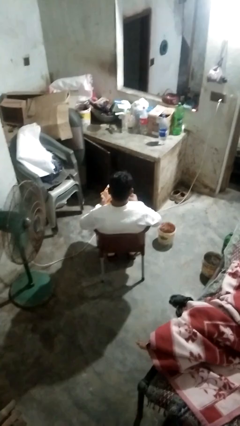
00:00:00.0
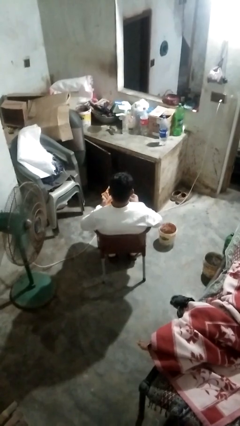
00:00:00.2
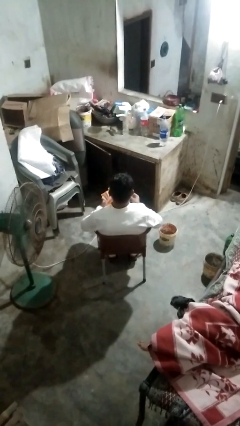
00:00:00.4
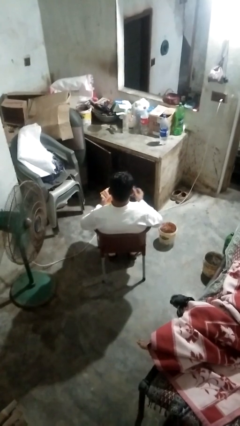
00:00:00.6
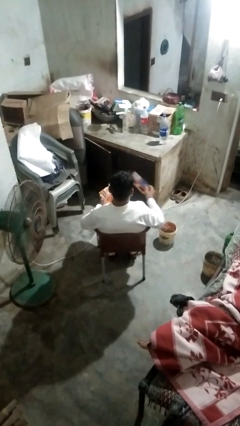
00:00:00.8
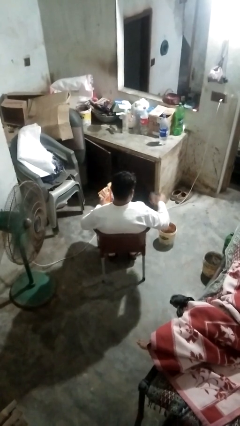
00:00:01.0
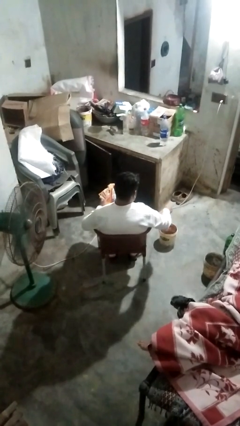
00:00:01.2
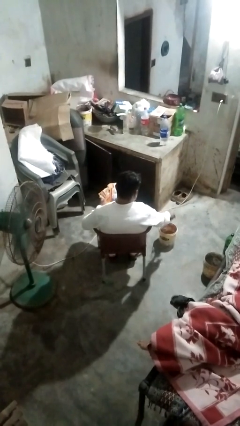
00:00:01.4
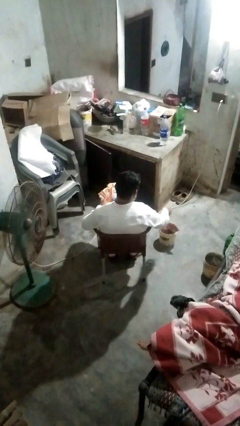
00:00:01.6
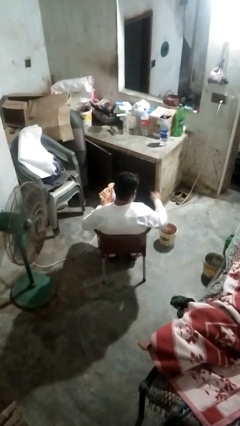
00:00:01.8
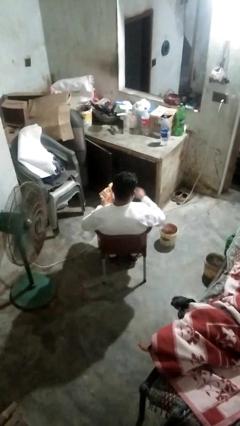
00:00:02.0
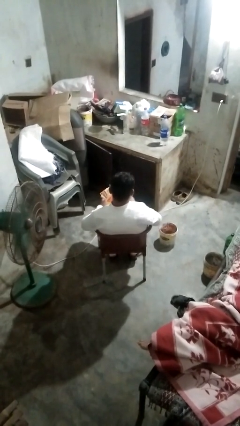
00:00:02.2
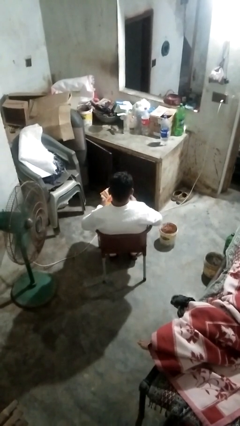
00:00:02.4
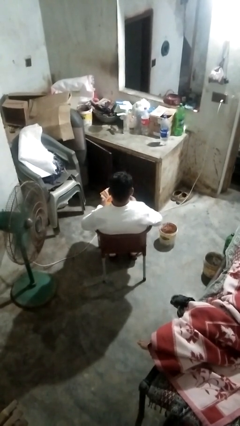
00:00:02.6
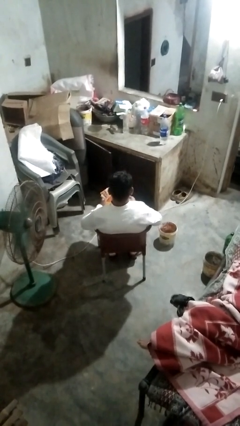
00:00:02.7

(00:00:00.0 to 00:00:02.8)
person discards trash

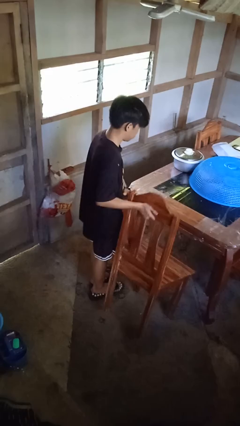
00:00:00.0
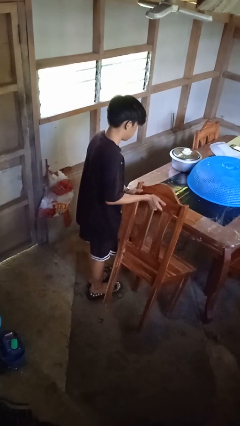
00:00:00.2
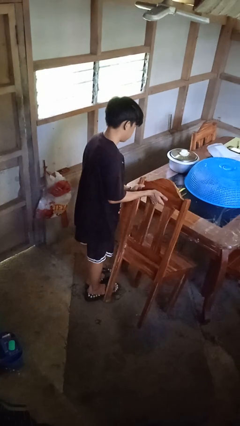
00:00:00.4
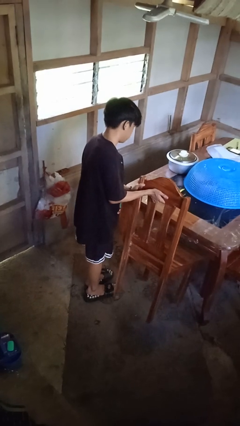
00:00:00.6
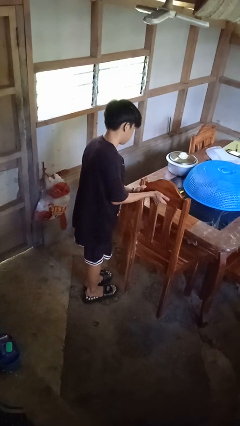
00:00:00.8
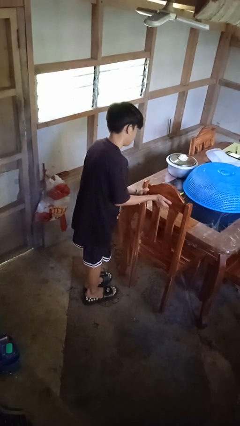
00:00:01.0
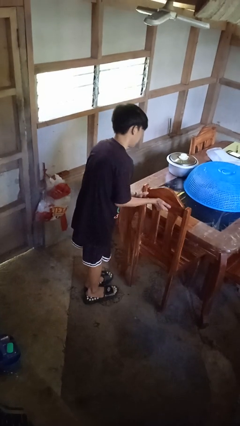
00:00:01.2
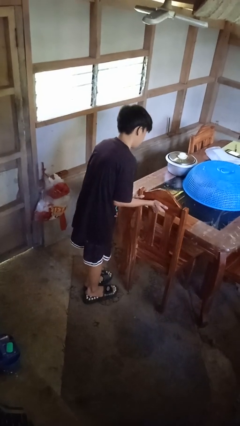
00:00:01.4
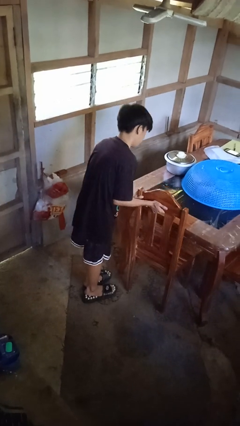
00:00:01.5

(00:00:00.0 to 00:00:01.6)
person pushes in chair

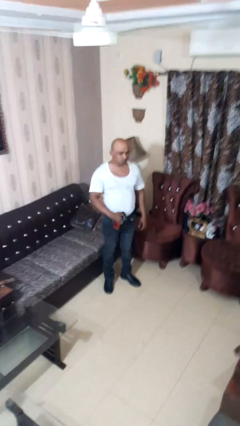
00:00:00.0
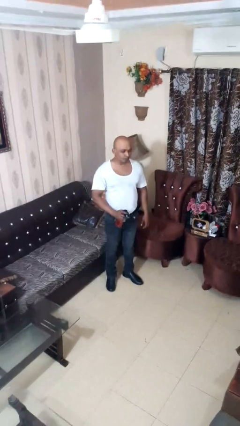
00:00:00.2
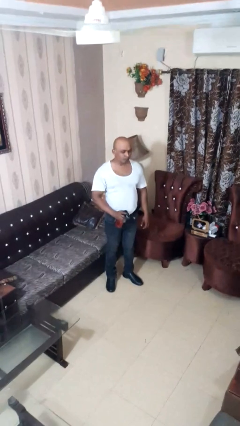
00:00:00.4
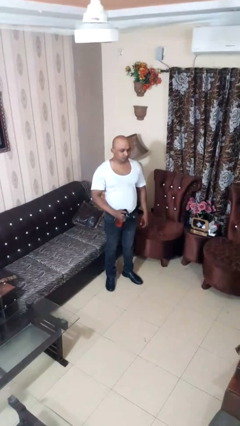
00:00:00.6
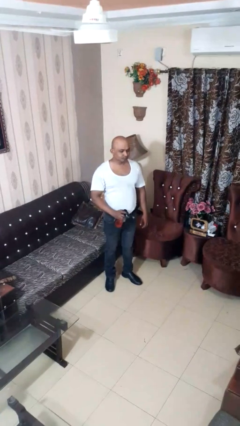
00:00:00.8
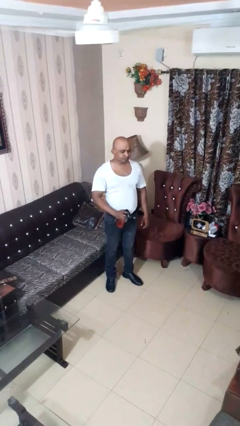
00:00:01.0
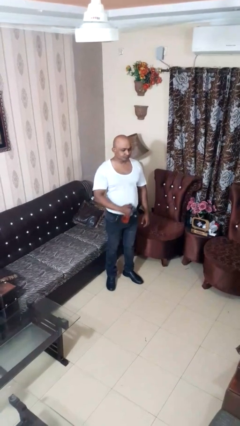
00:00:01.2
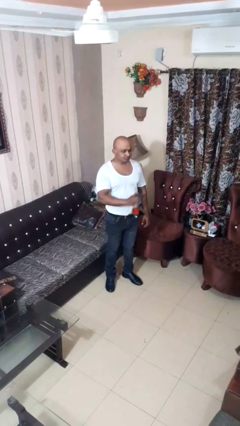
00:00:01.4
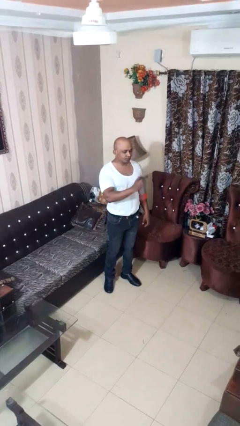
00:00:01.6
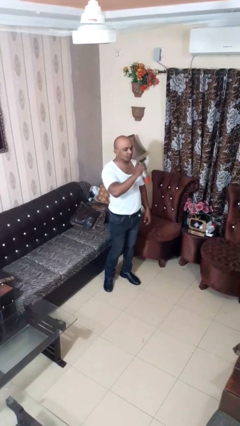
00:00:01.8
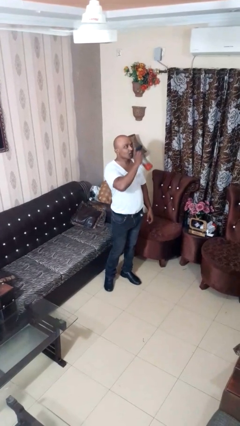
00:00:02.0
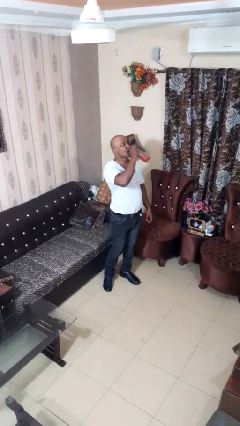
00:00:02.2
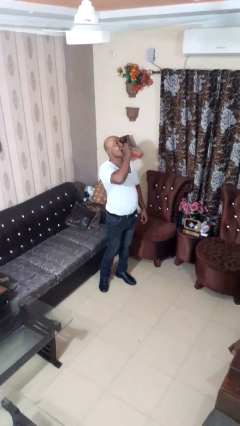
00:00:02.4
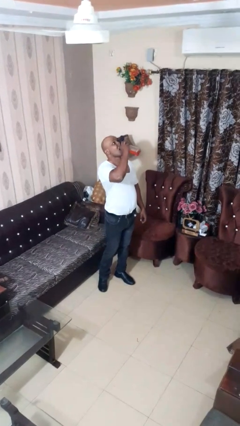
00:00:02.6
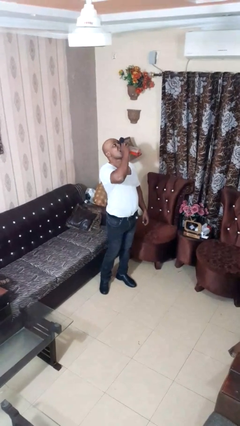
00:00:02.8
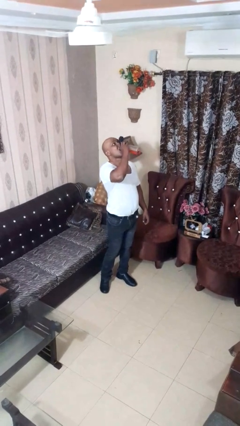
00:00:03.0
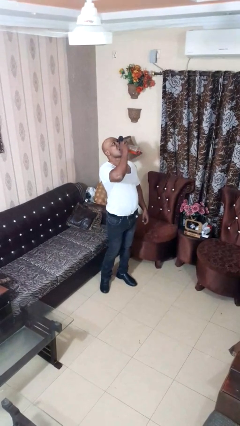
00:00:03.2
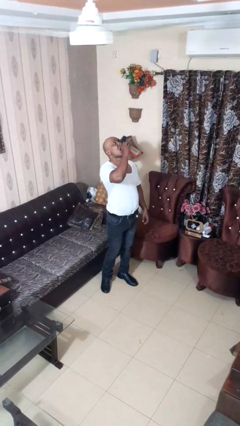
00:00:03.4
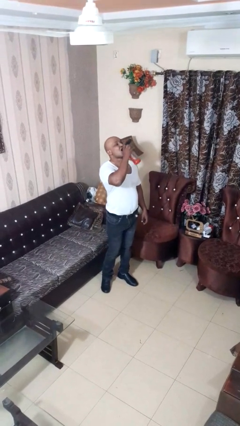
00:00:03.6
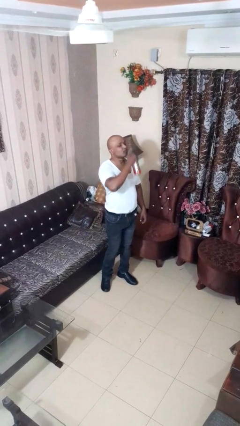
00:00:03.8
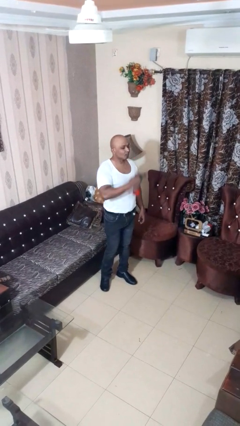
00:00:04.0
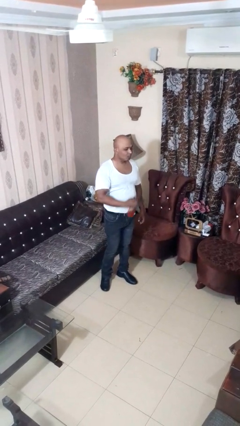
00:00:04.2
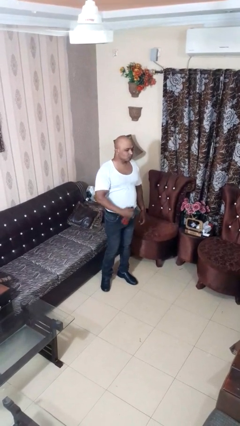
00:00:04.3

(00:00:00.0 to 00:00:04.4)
person drinks from bottle

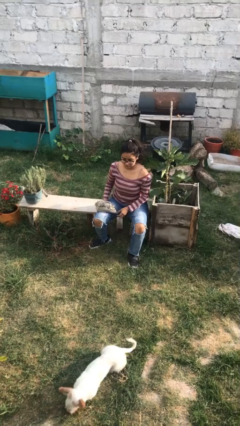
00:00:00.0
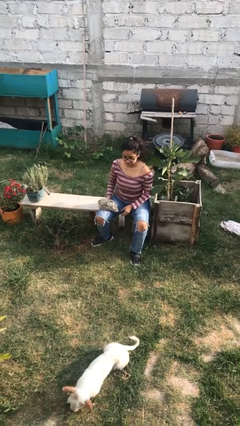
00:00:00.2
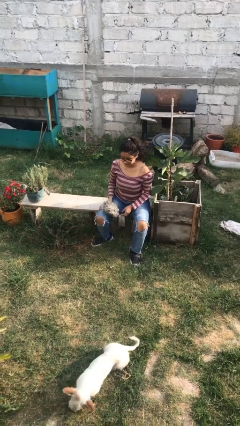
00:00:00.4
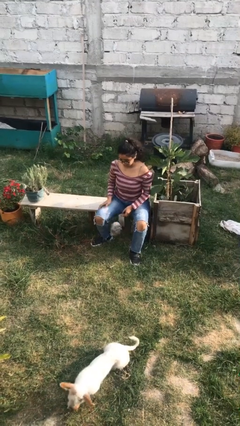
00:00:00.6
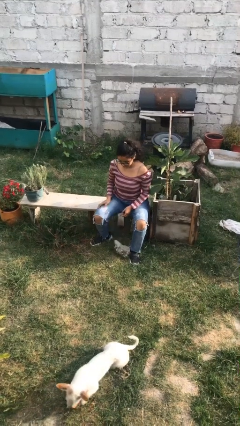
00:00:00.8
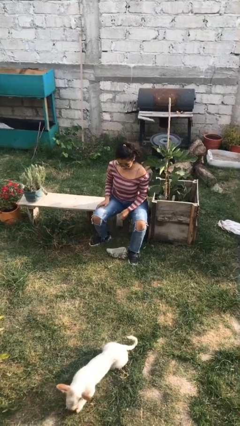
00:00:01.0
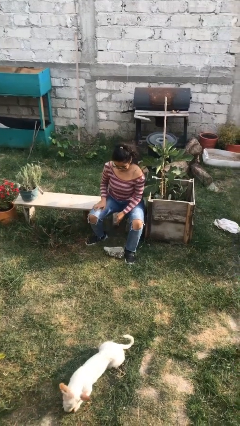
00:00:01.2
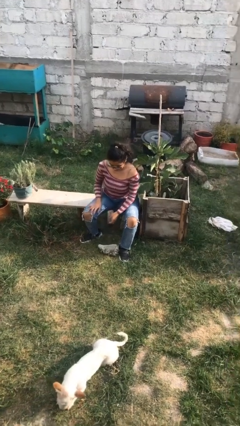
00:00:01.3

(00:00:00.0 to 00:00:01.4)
person drops object

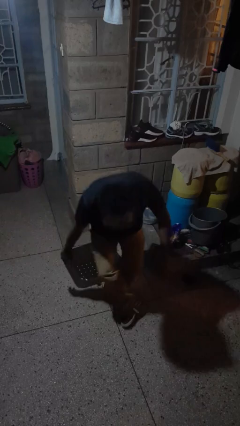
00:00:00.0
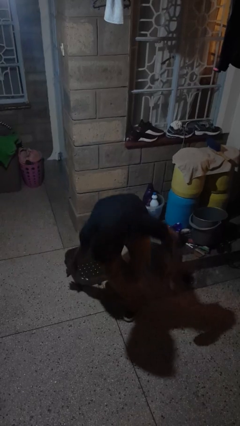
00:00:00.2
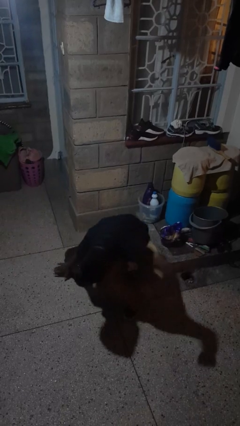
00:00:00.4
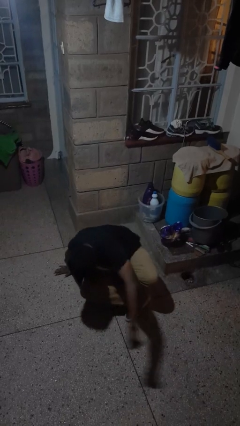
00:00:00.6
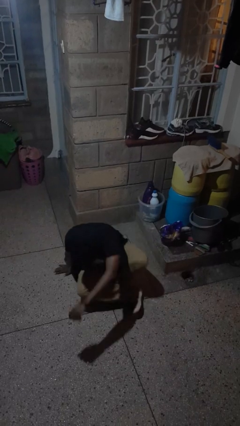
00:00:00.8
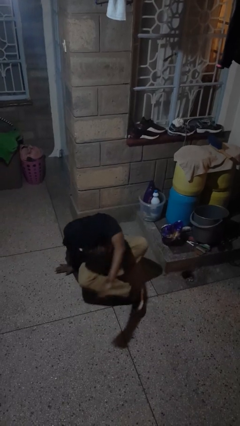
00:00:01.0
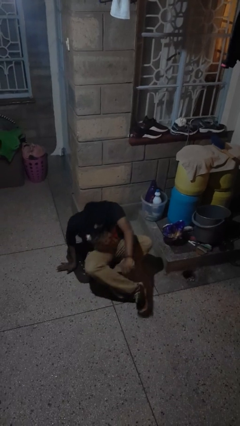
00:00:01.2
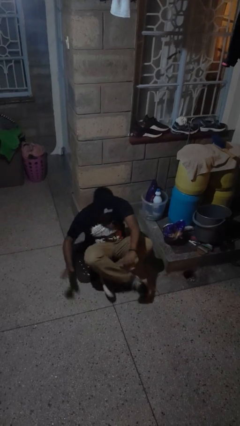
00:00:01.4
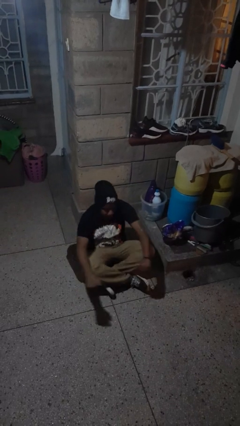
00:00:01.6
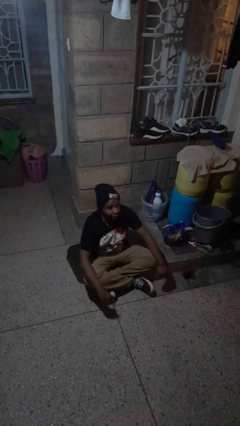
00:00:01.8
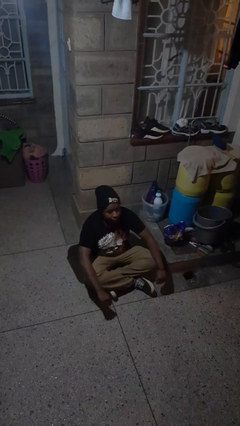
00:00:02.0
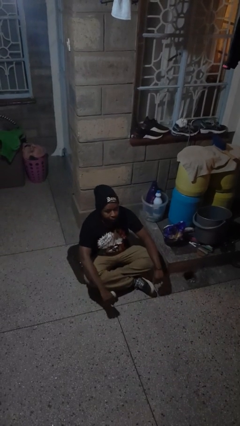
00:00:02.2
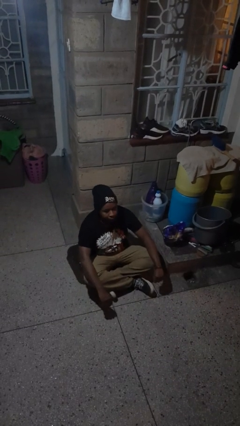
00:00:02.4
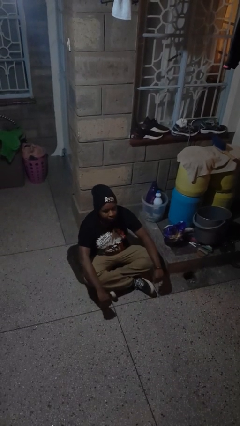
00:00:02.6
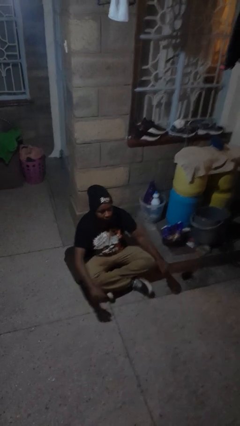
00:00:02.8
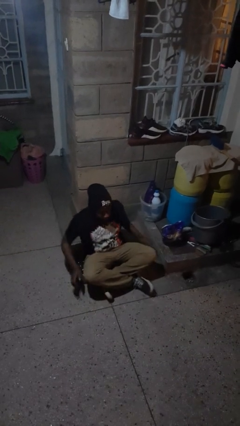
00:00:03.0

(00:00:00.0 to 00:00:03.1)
person sits crisscross

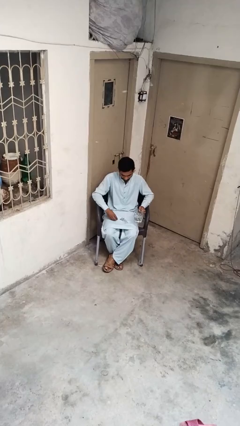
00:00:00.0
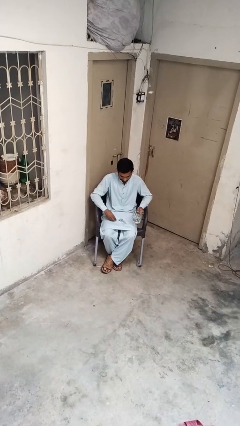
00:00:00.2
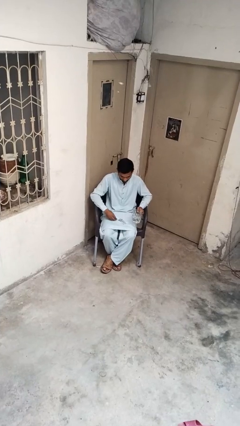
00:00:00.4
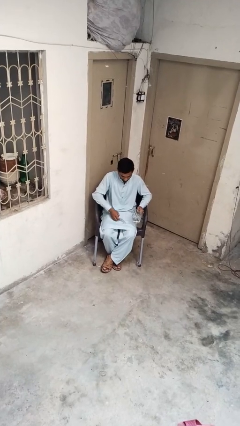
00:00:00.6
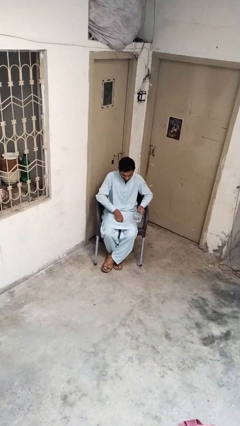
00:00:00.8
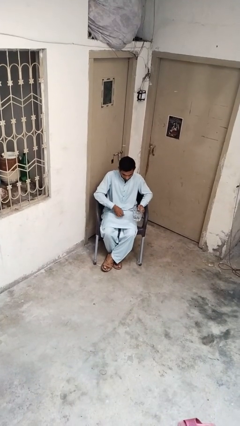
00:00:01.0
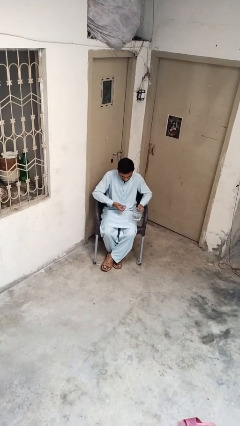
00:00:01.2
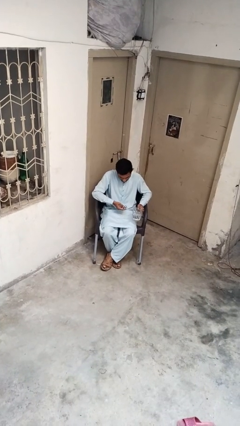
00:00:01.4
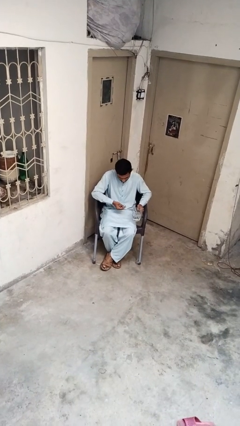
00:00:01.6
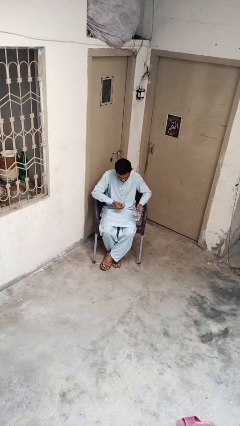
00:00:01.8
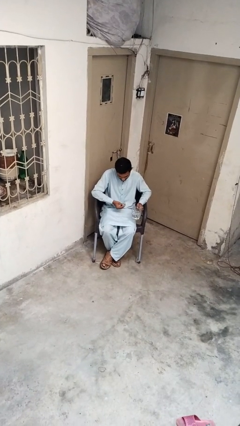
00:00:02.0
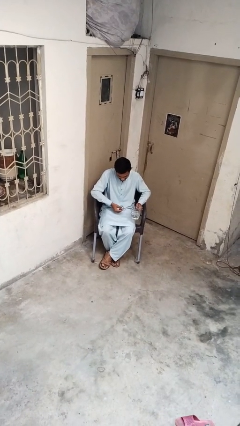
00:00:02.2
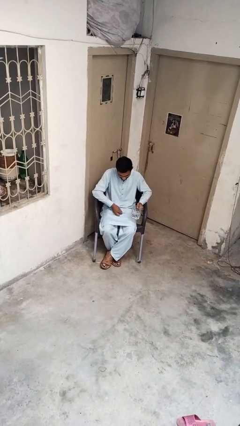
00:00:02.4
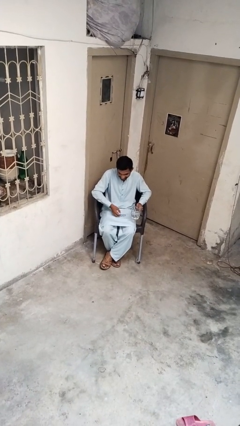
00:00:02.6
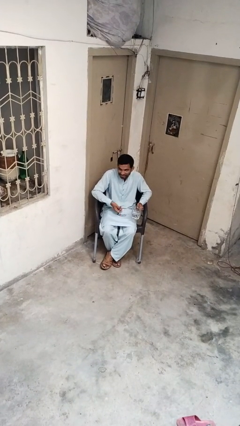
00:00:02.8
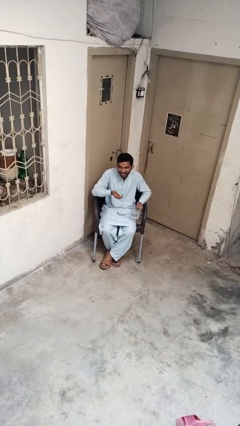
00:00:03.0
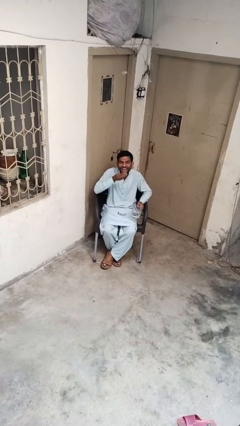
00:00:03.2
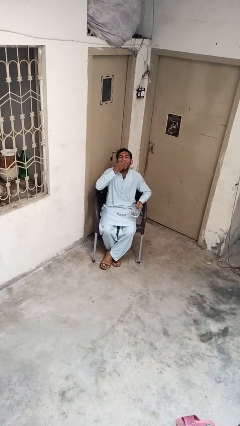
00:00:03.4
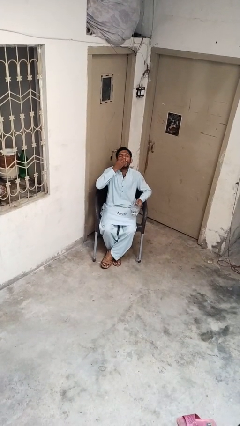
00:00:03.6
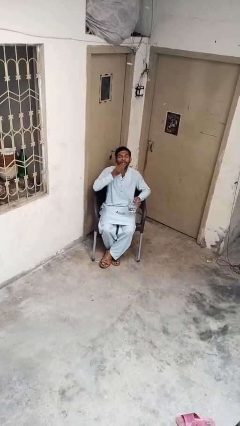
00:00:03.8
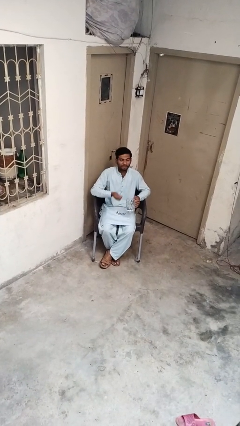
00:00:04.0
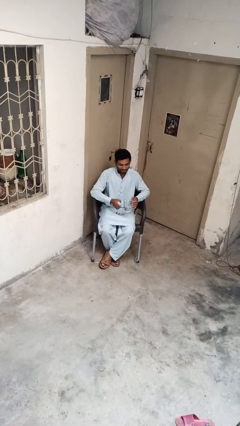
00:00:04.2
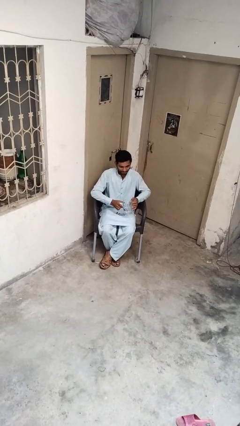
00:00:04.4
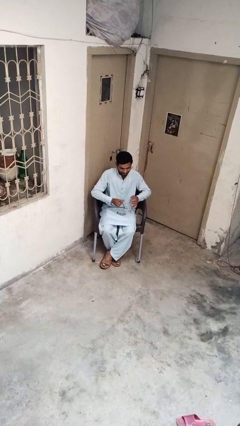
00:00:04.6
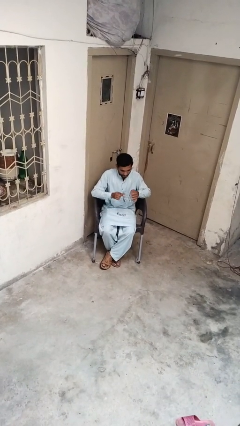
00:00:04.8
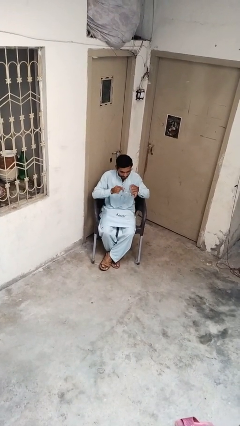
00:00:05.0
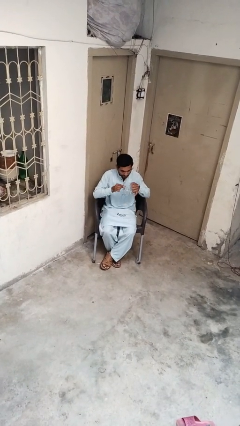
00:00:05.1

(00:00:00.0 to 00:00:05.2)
person takes medicine pills
